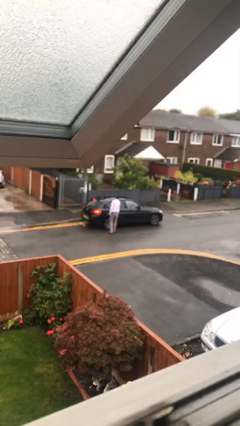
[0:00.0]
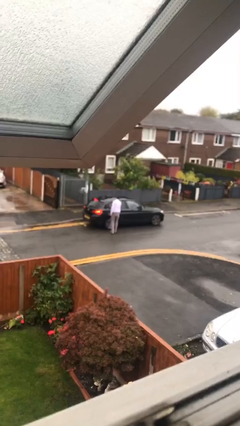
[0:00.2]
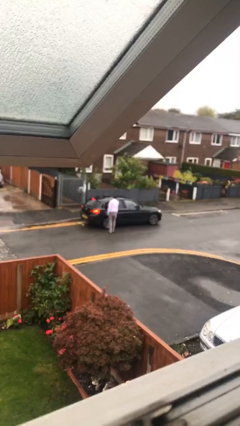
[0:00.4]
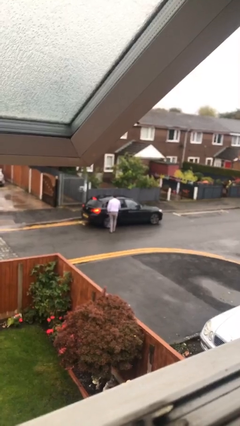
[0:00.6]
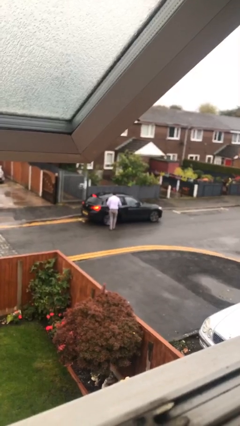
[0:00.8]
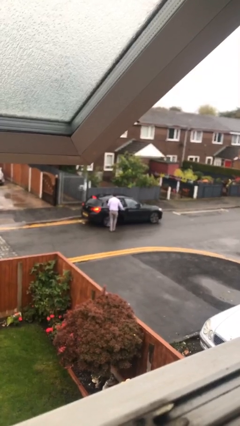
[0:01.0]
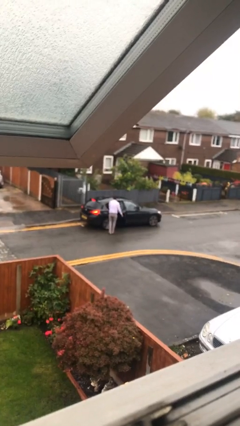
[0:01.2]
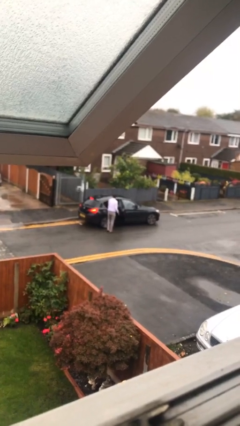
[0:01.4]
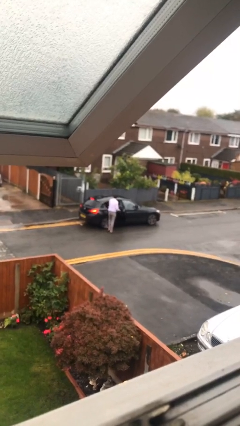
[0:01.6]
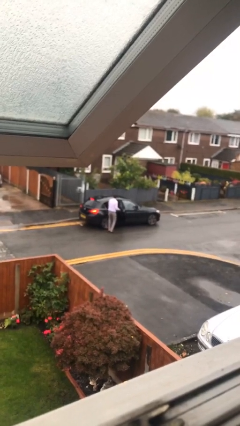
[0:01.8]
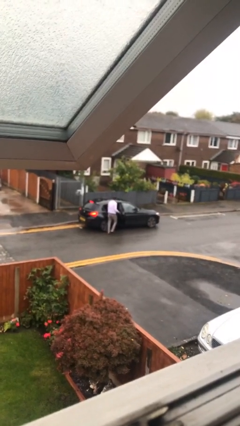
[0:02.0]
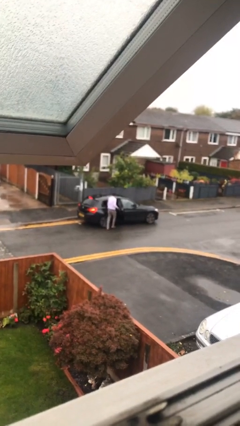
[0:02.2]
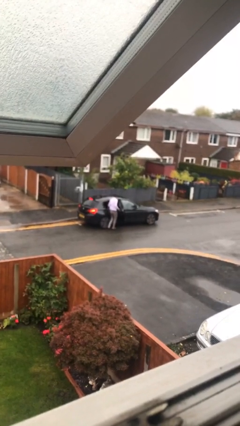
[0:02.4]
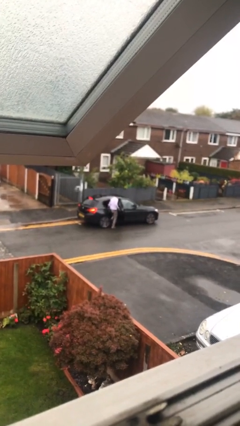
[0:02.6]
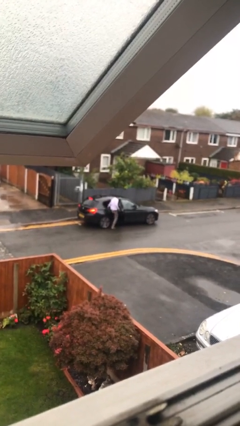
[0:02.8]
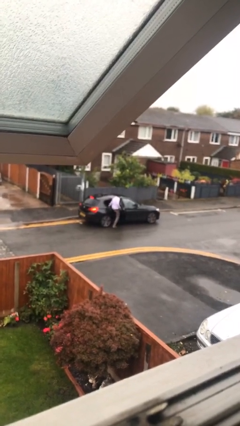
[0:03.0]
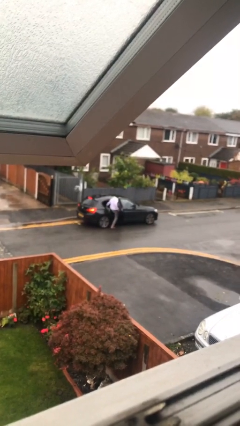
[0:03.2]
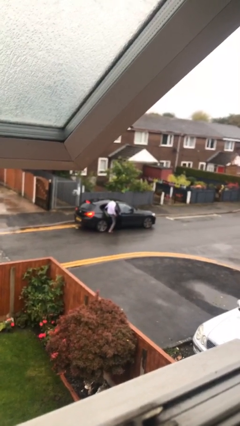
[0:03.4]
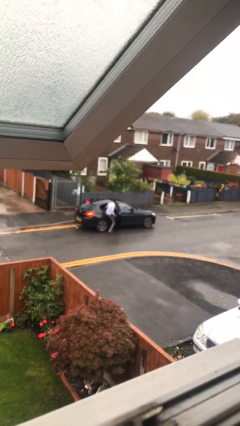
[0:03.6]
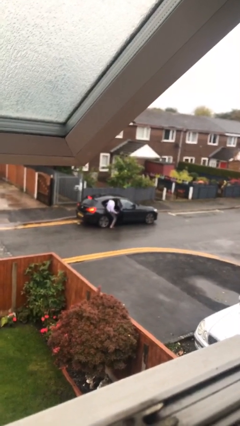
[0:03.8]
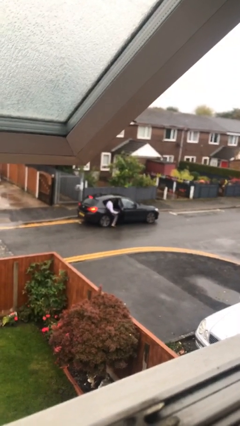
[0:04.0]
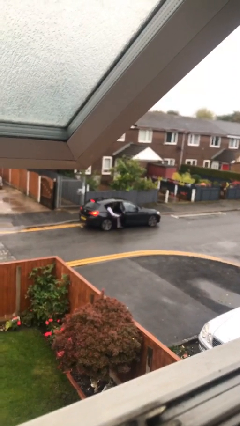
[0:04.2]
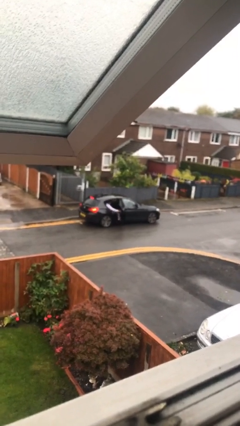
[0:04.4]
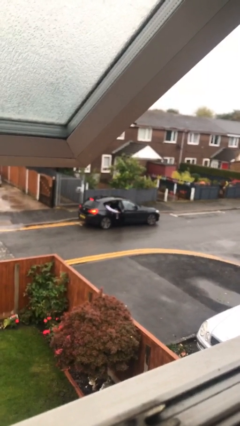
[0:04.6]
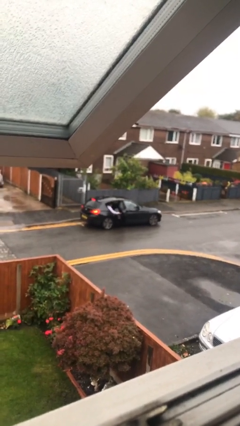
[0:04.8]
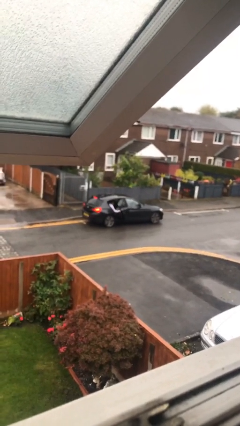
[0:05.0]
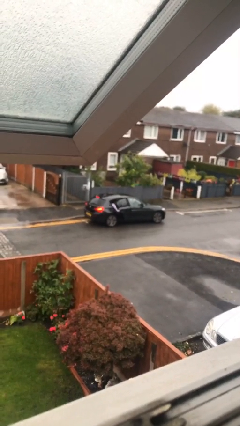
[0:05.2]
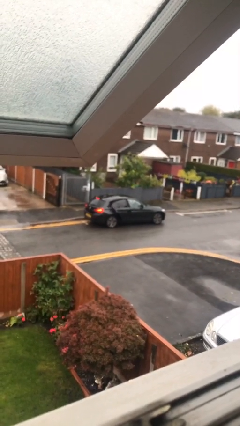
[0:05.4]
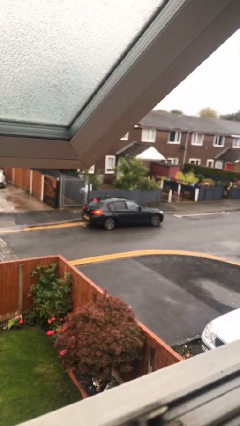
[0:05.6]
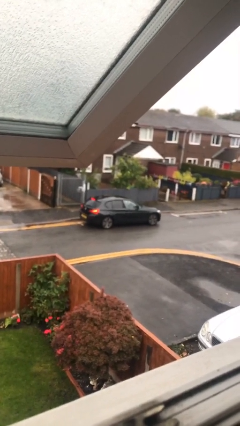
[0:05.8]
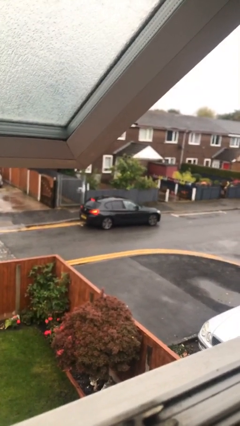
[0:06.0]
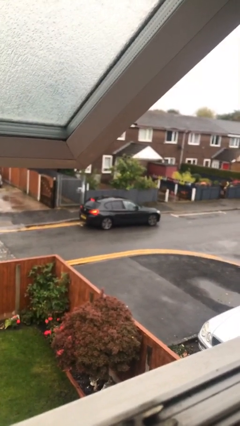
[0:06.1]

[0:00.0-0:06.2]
car picks up person

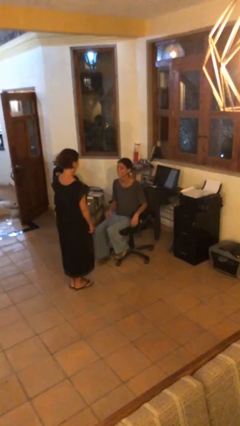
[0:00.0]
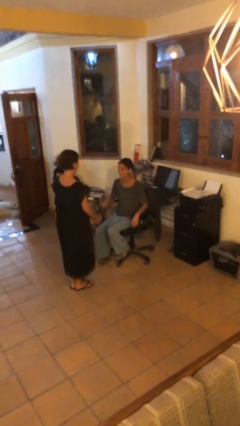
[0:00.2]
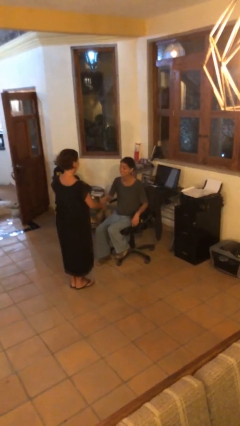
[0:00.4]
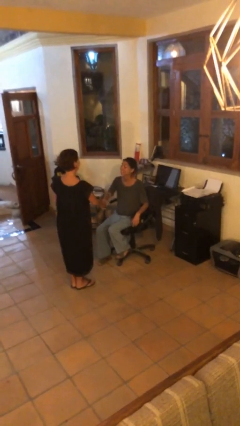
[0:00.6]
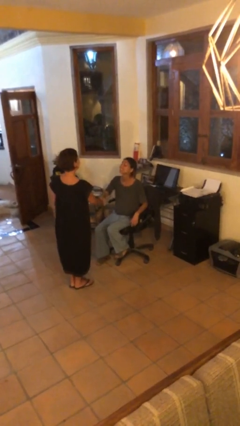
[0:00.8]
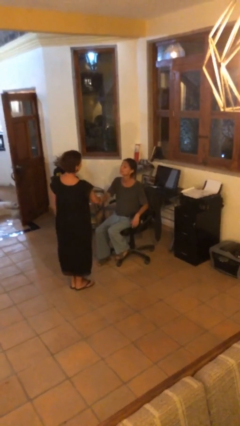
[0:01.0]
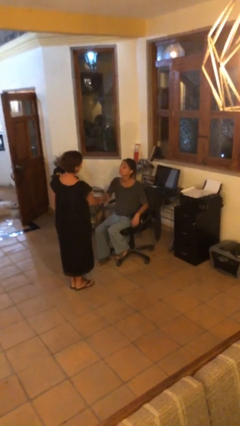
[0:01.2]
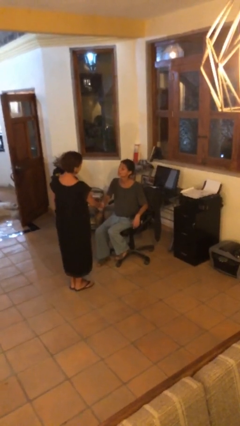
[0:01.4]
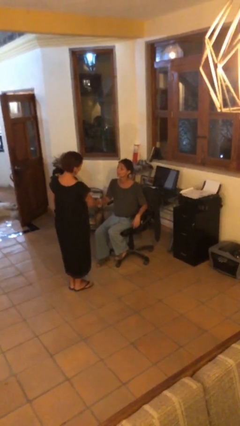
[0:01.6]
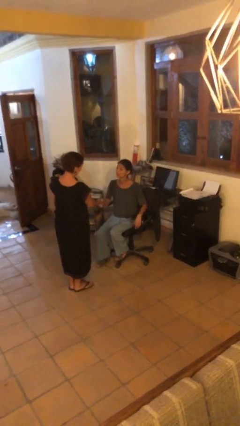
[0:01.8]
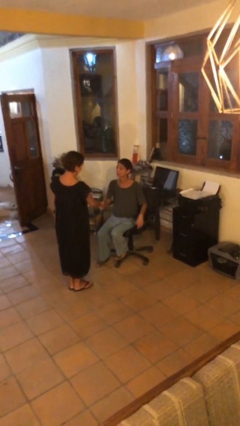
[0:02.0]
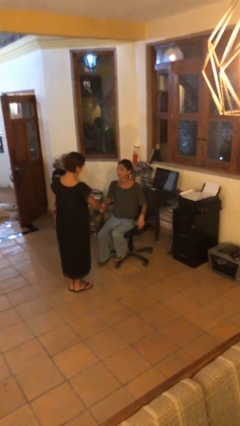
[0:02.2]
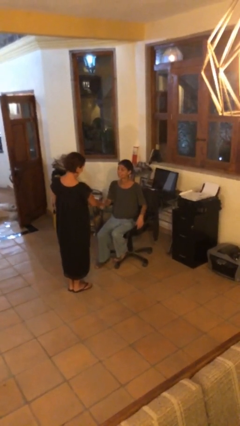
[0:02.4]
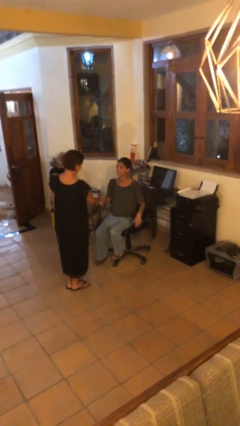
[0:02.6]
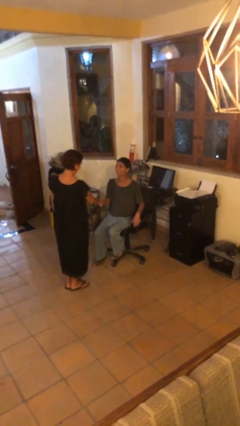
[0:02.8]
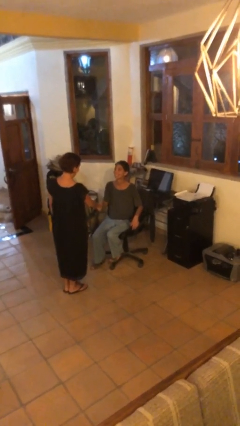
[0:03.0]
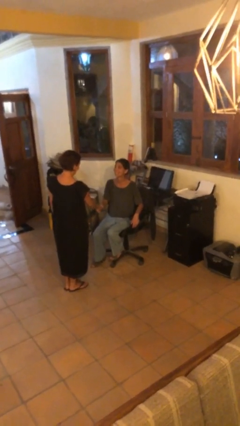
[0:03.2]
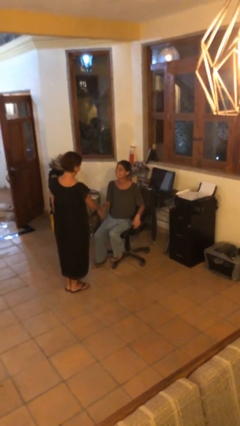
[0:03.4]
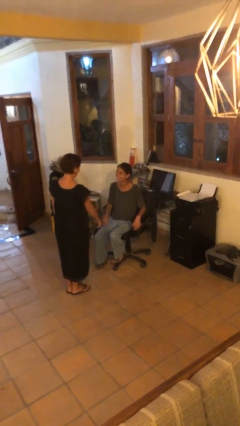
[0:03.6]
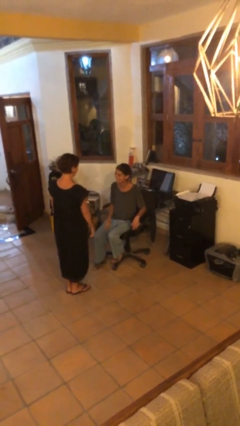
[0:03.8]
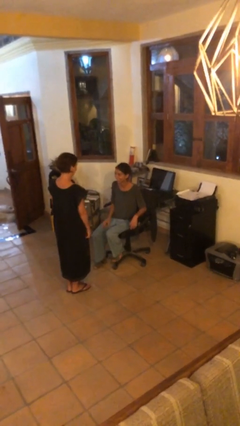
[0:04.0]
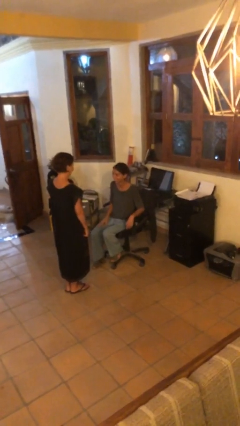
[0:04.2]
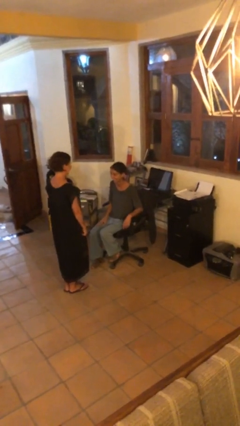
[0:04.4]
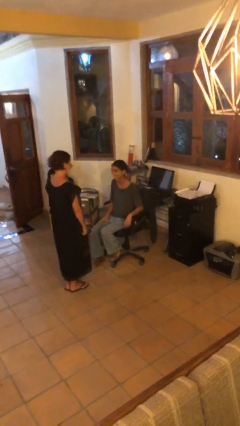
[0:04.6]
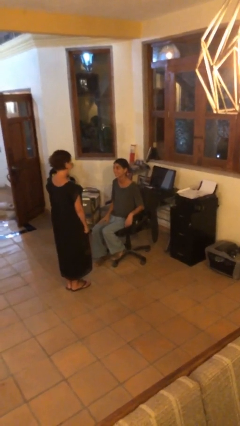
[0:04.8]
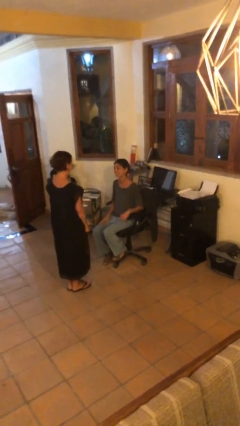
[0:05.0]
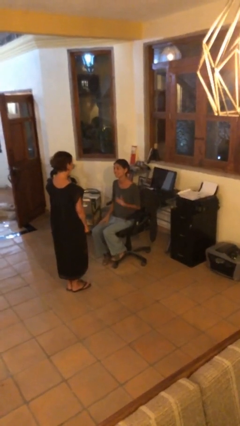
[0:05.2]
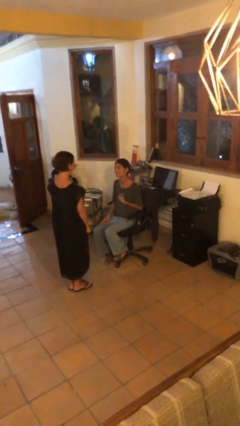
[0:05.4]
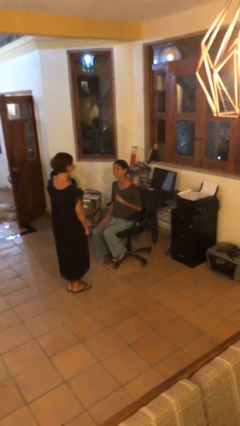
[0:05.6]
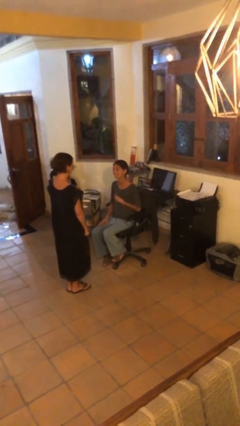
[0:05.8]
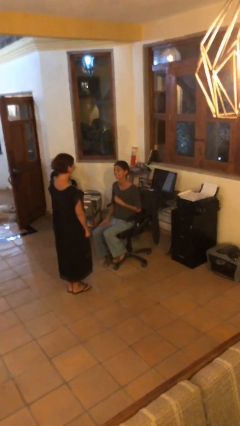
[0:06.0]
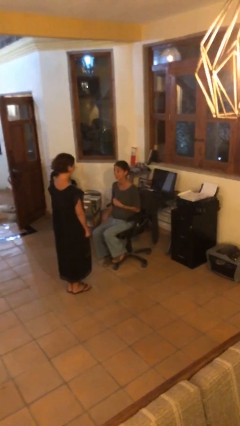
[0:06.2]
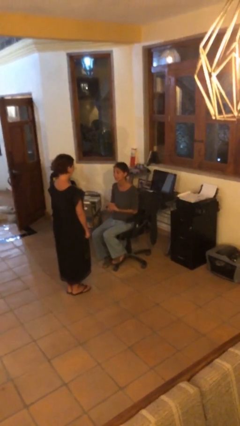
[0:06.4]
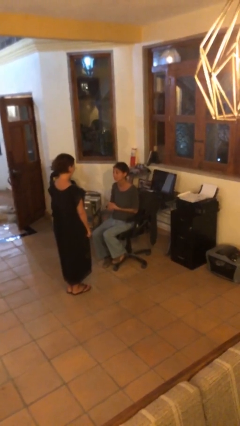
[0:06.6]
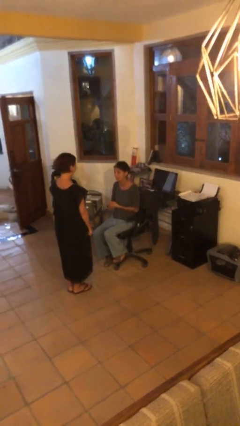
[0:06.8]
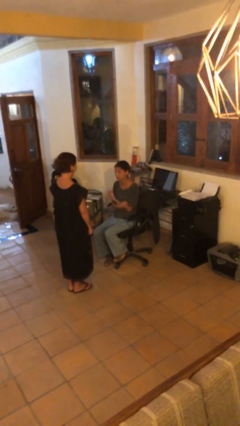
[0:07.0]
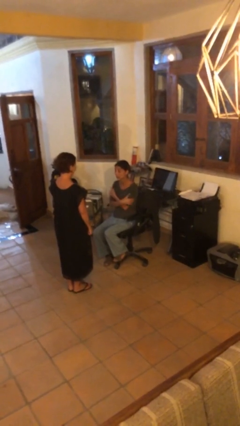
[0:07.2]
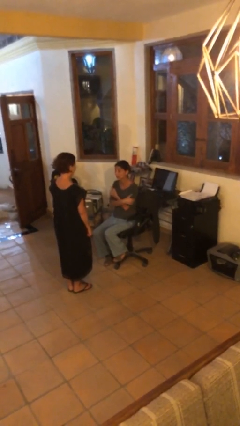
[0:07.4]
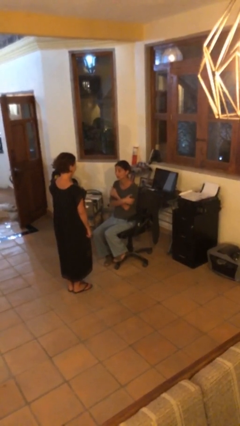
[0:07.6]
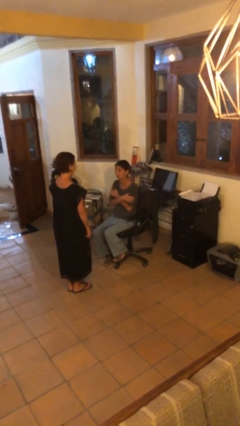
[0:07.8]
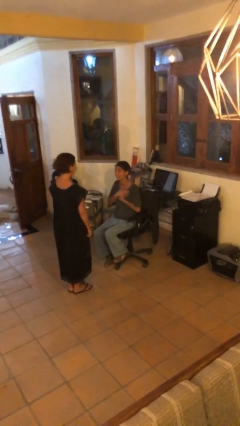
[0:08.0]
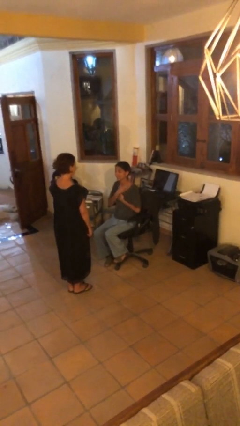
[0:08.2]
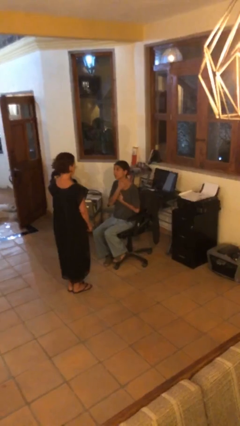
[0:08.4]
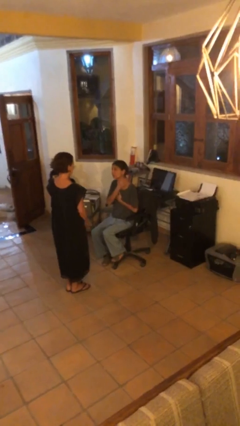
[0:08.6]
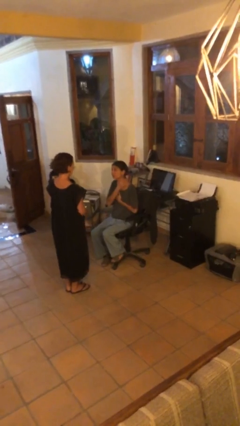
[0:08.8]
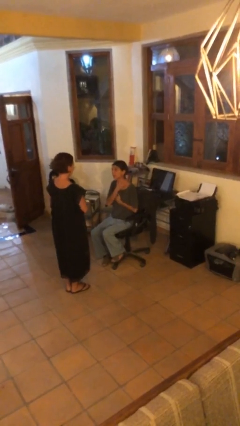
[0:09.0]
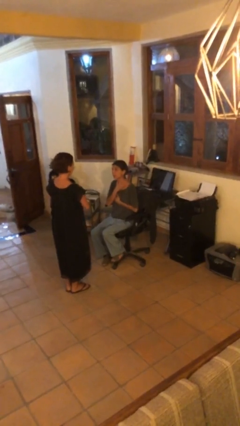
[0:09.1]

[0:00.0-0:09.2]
person shakes hand

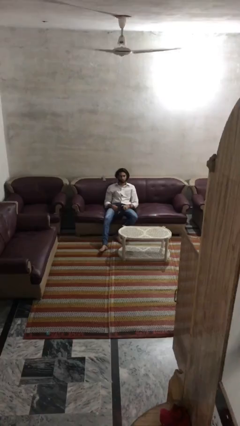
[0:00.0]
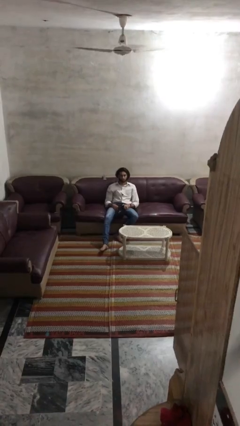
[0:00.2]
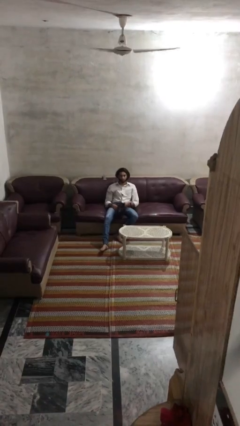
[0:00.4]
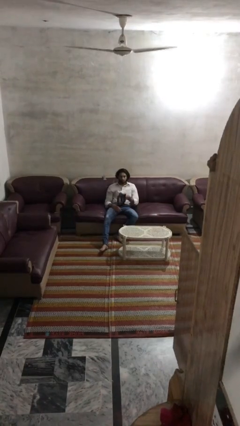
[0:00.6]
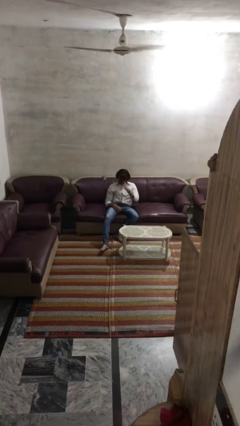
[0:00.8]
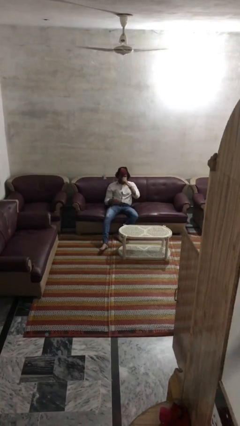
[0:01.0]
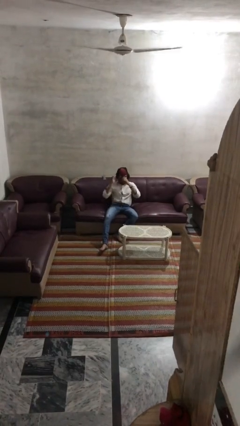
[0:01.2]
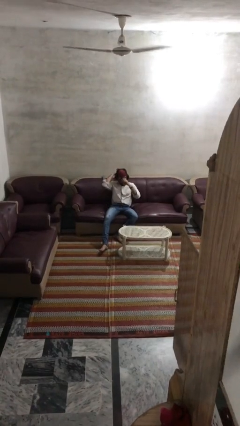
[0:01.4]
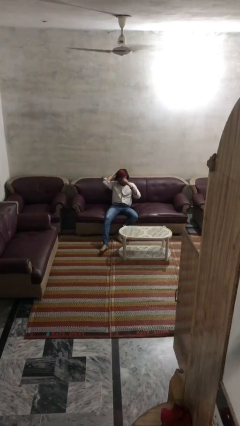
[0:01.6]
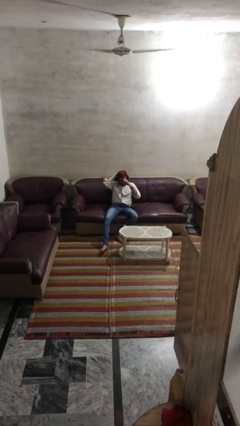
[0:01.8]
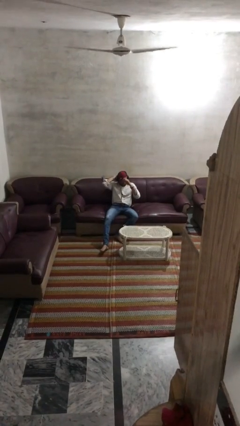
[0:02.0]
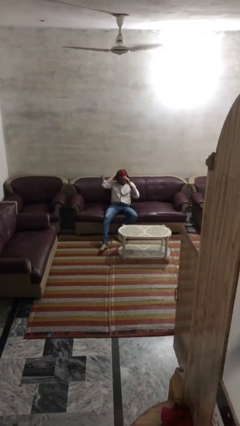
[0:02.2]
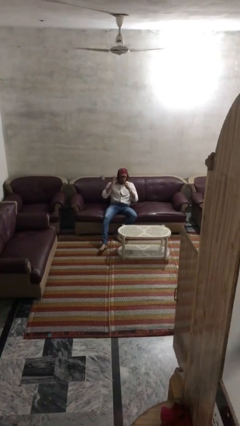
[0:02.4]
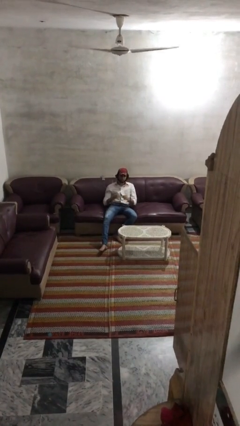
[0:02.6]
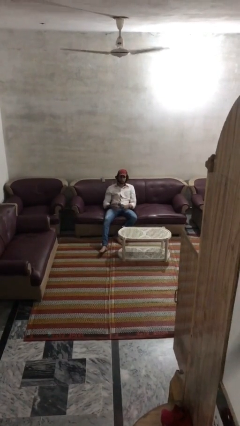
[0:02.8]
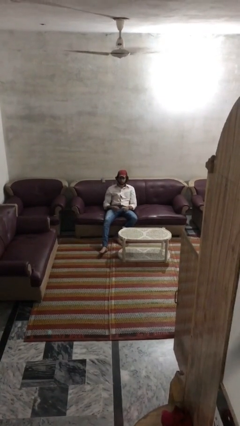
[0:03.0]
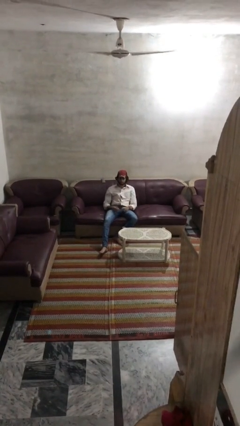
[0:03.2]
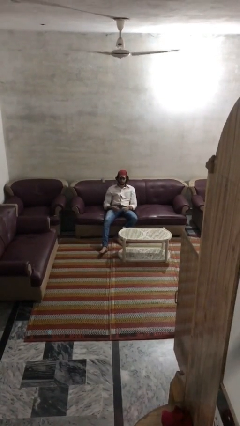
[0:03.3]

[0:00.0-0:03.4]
person puts on hat
